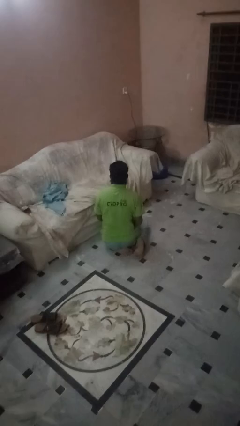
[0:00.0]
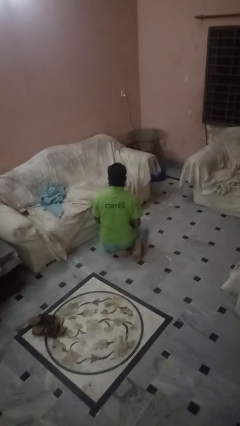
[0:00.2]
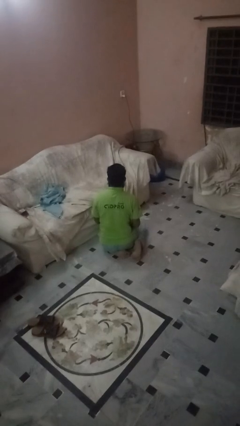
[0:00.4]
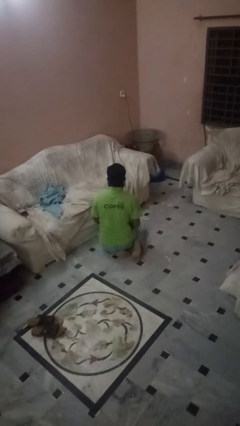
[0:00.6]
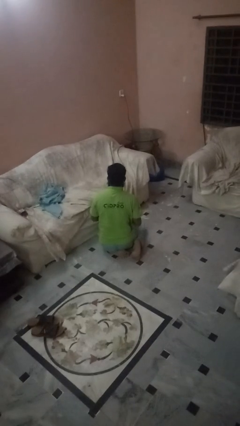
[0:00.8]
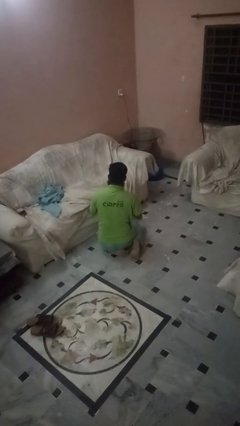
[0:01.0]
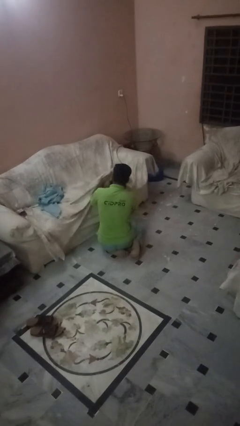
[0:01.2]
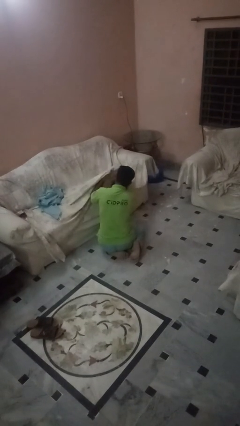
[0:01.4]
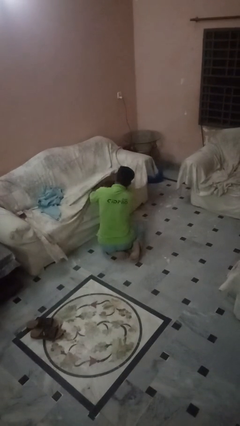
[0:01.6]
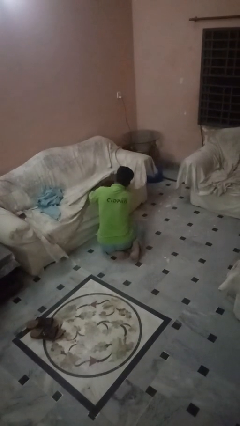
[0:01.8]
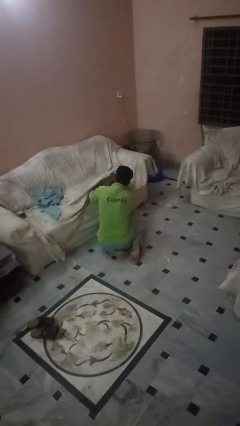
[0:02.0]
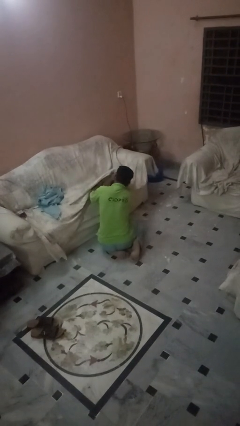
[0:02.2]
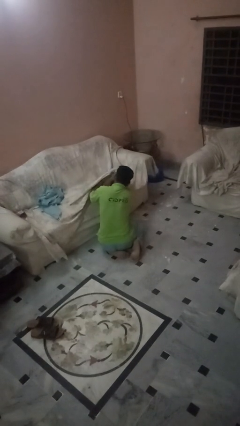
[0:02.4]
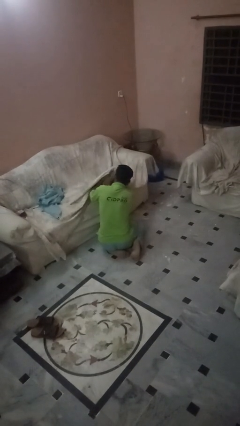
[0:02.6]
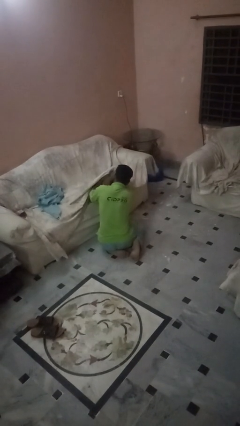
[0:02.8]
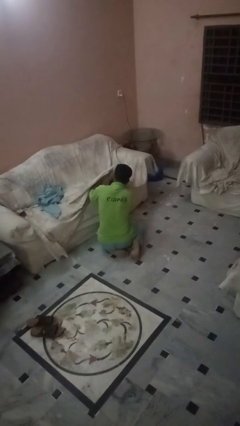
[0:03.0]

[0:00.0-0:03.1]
person searches in couch

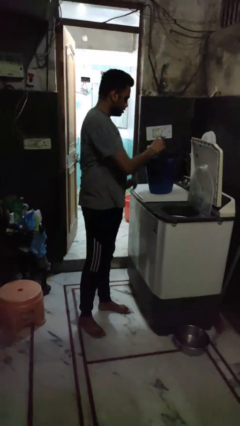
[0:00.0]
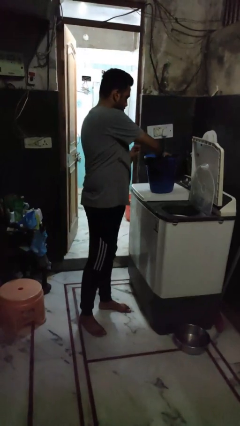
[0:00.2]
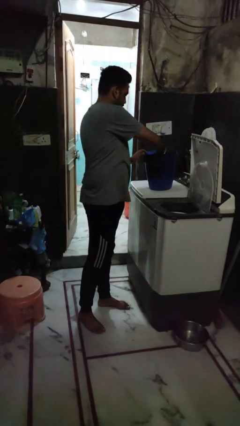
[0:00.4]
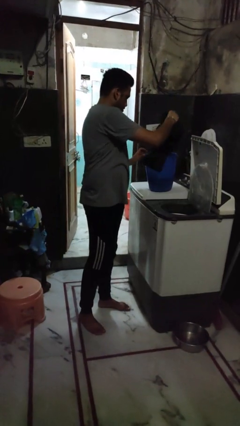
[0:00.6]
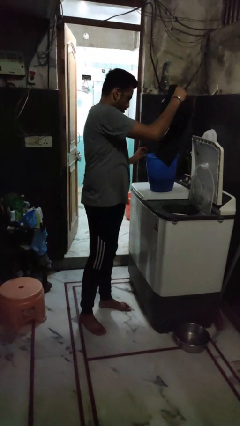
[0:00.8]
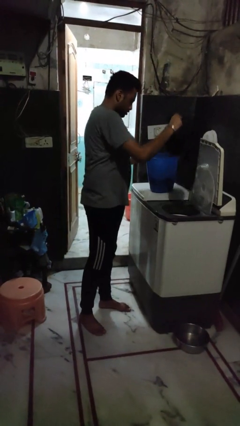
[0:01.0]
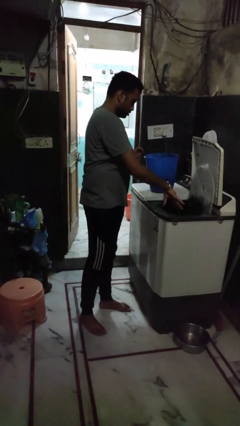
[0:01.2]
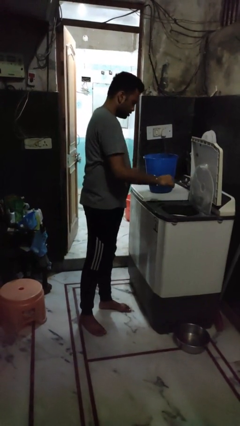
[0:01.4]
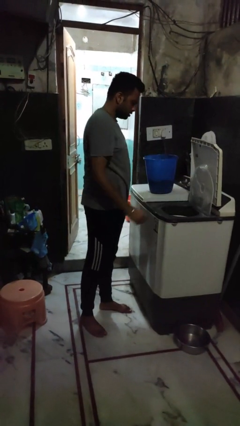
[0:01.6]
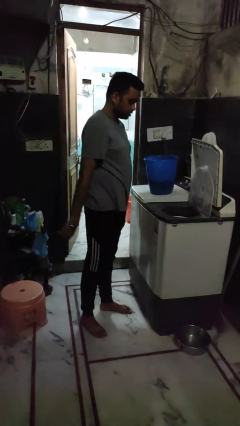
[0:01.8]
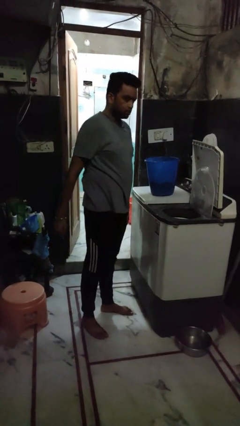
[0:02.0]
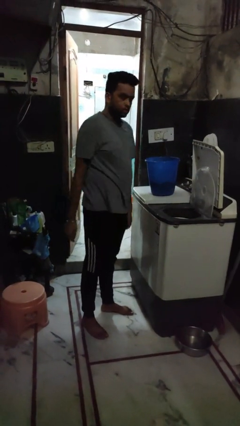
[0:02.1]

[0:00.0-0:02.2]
person loads dryer

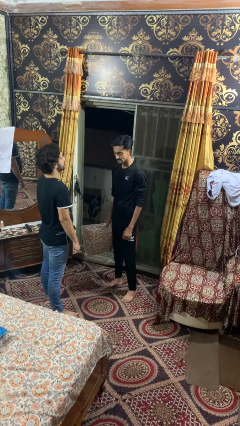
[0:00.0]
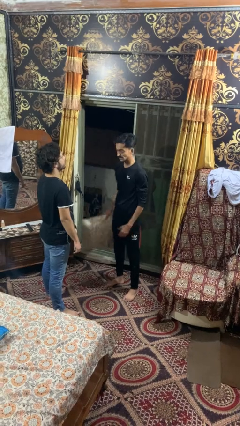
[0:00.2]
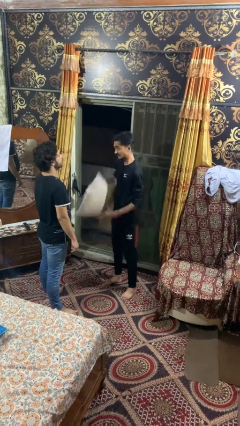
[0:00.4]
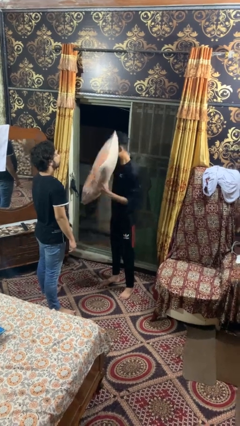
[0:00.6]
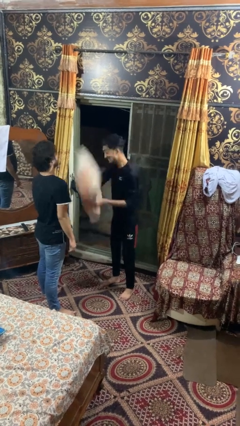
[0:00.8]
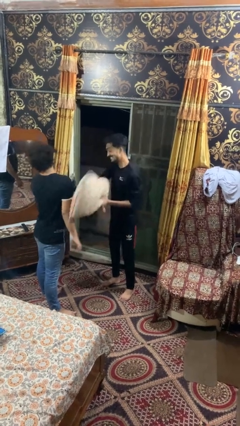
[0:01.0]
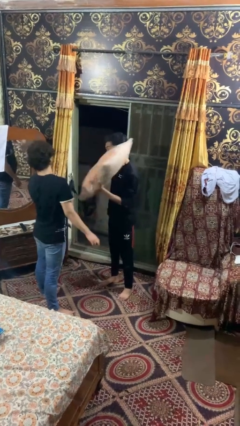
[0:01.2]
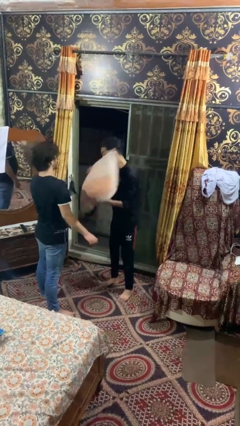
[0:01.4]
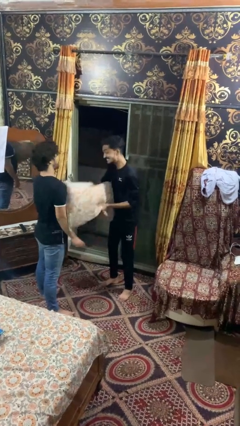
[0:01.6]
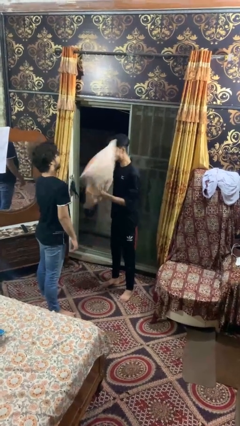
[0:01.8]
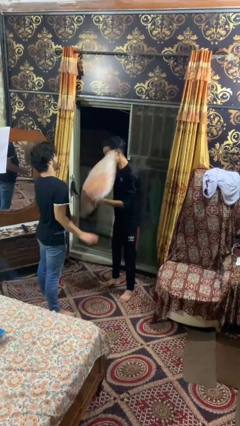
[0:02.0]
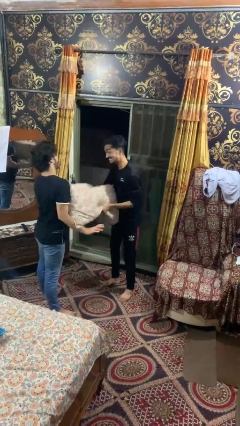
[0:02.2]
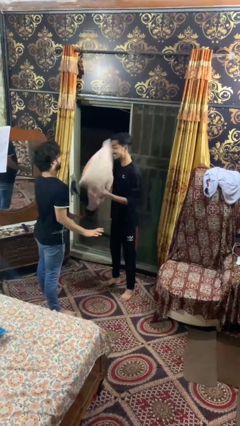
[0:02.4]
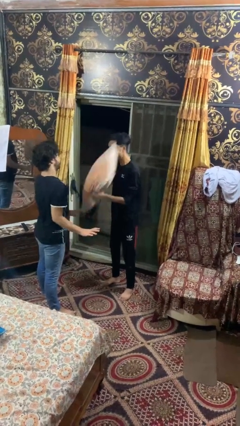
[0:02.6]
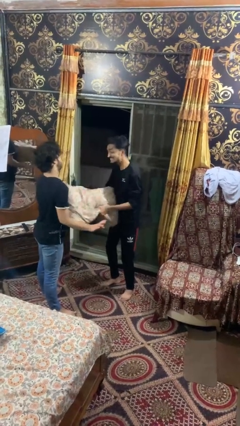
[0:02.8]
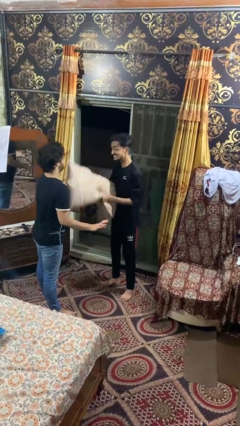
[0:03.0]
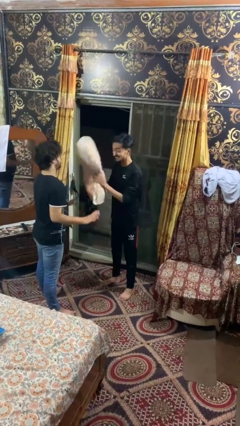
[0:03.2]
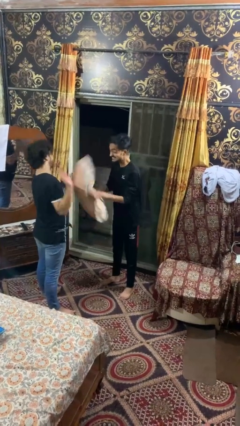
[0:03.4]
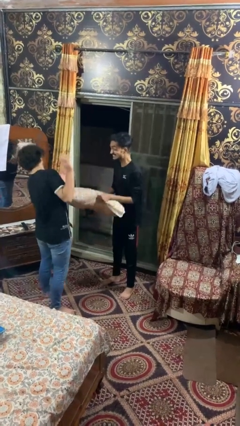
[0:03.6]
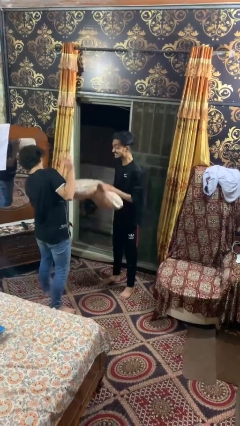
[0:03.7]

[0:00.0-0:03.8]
person hits person with pillow

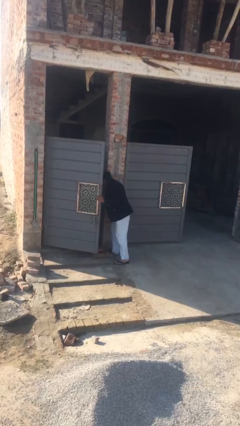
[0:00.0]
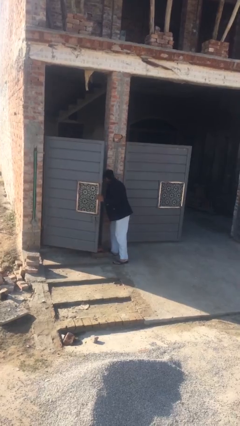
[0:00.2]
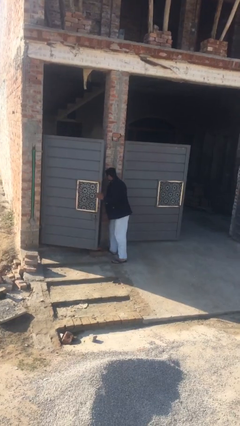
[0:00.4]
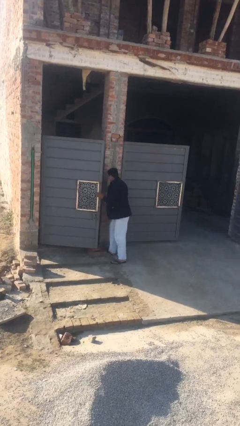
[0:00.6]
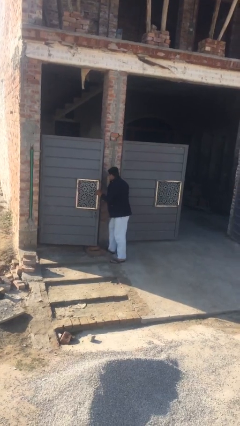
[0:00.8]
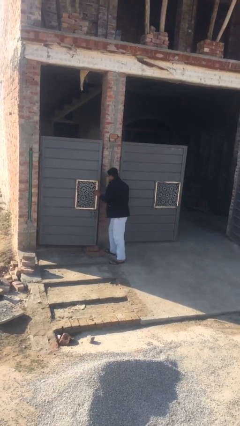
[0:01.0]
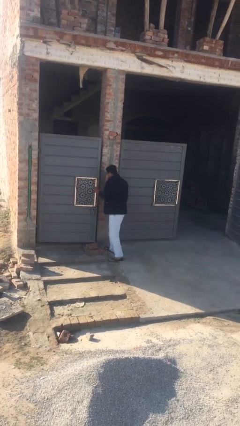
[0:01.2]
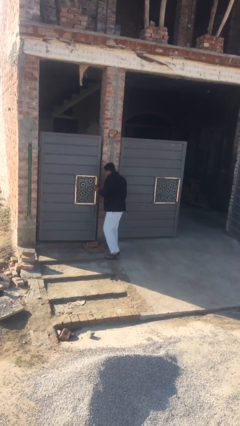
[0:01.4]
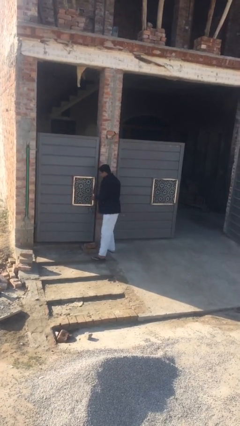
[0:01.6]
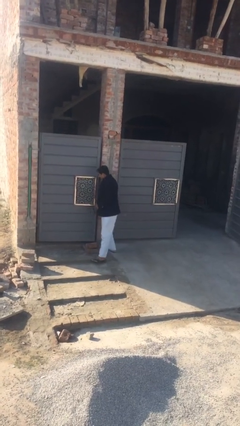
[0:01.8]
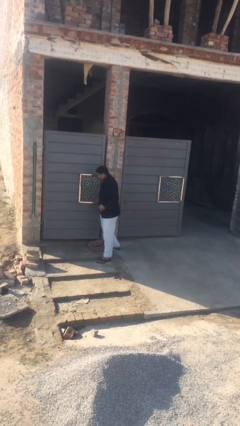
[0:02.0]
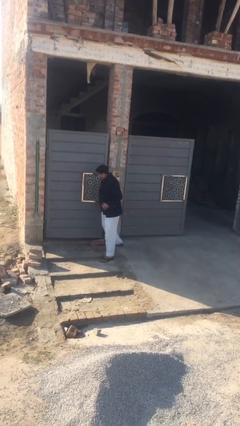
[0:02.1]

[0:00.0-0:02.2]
person closes facility door

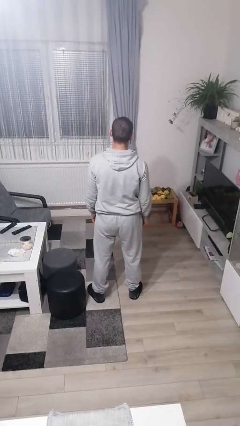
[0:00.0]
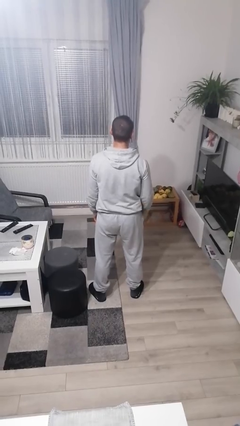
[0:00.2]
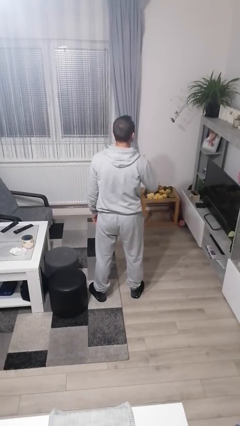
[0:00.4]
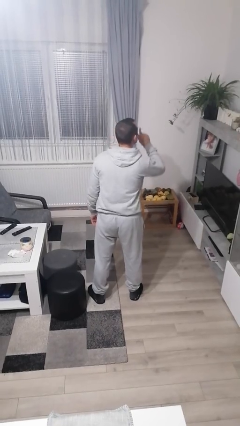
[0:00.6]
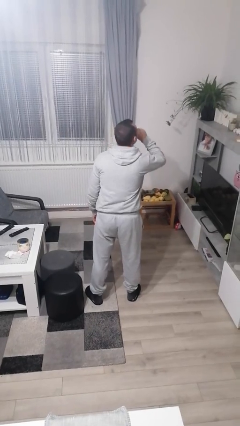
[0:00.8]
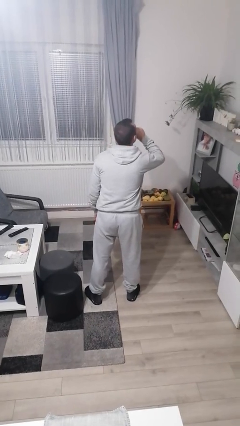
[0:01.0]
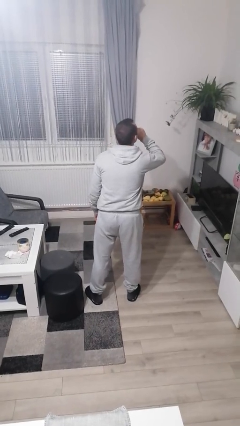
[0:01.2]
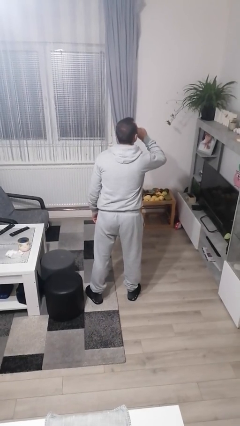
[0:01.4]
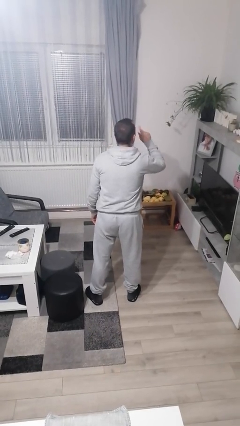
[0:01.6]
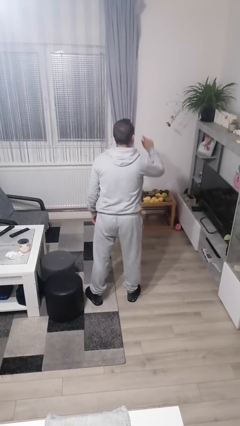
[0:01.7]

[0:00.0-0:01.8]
person gestures be quiet

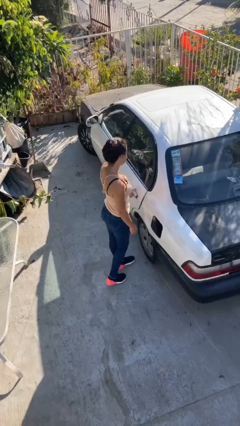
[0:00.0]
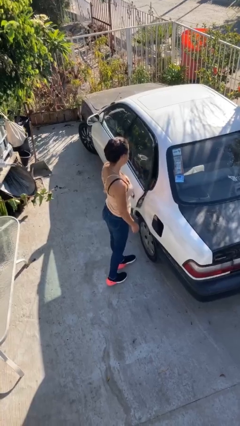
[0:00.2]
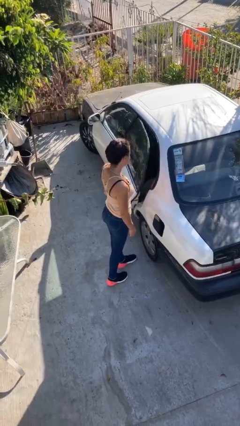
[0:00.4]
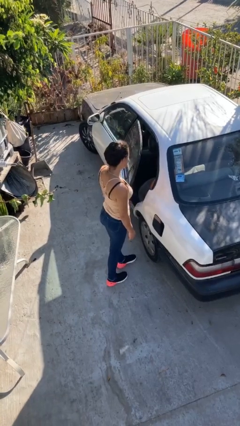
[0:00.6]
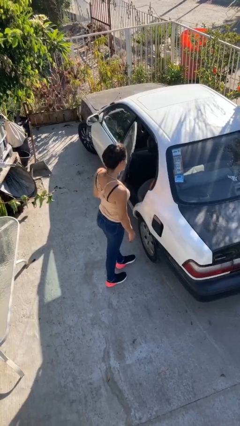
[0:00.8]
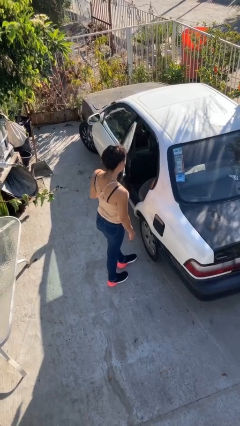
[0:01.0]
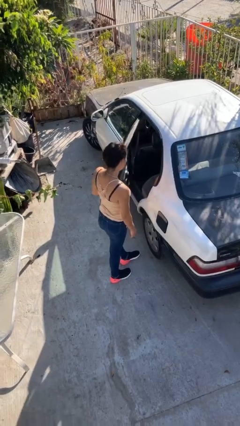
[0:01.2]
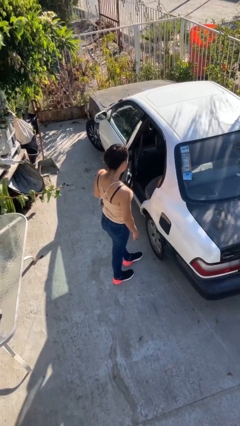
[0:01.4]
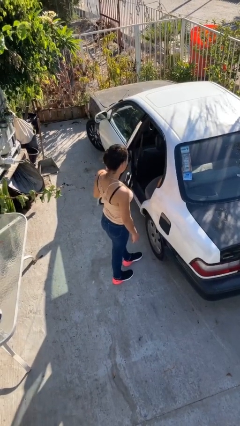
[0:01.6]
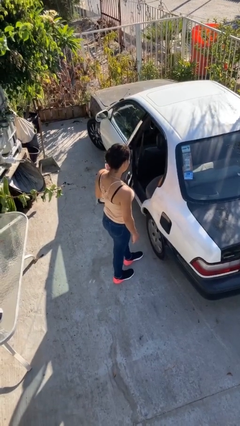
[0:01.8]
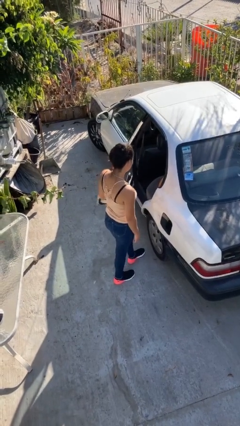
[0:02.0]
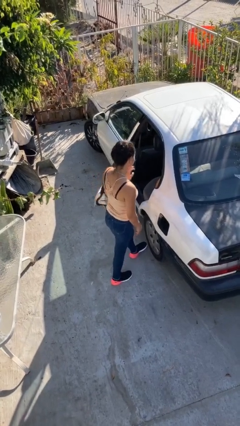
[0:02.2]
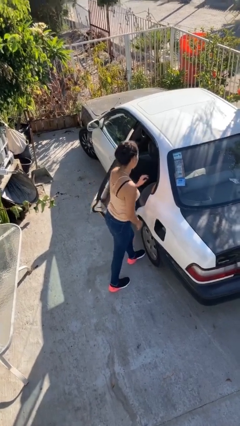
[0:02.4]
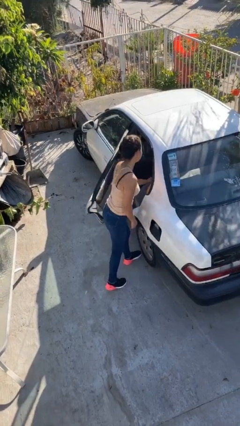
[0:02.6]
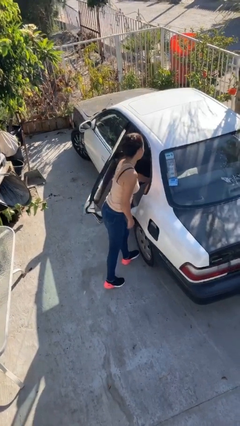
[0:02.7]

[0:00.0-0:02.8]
person opens car door

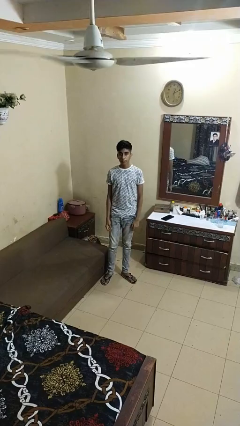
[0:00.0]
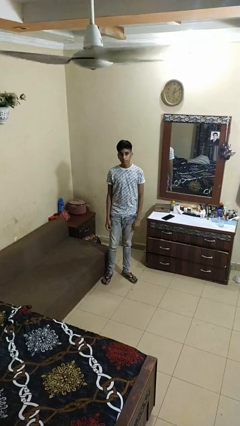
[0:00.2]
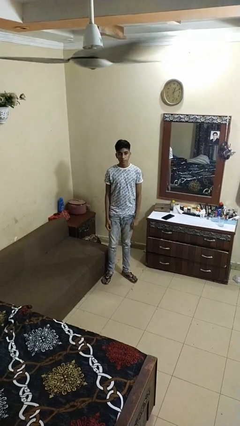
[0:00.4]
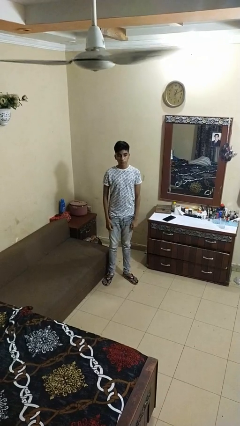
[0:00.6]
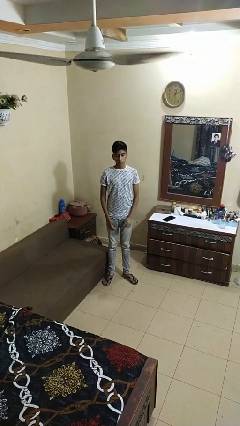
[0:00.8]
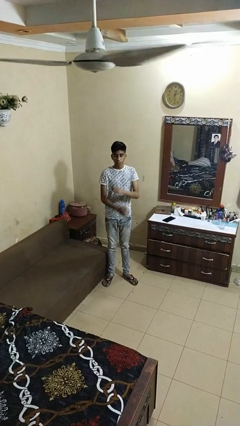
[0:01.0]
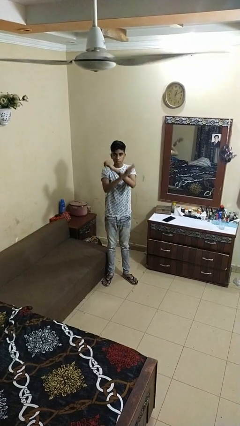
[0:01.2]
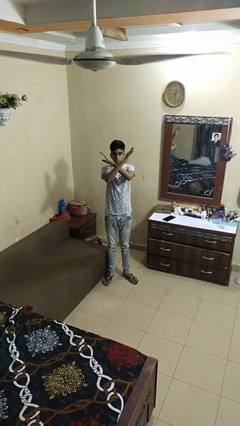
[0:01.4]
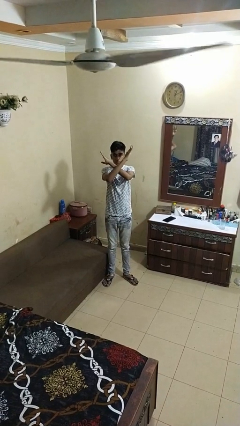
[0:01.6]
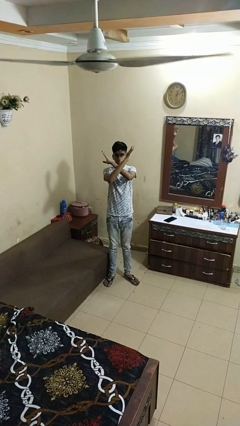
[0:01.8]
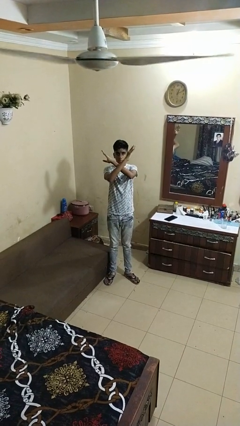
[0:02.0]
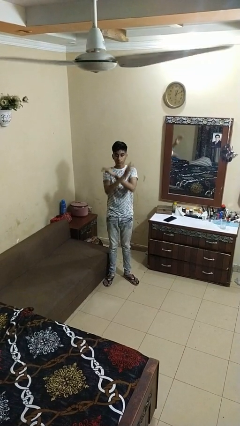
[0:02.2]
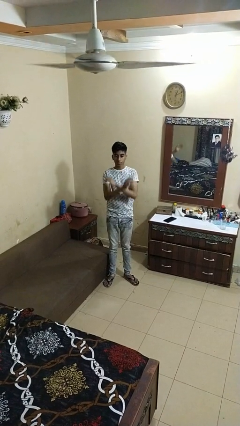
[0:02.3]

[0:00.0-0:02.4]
person gestures arms x
